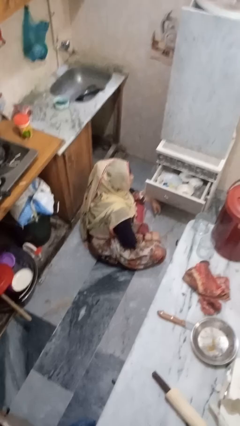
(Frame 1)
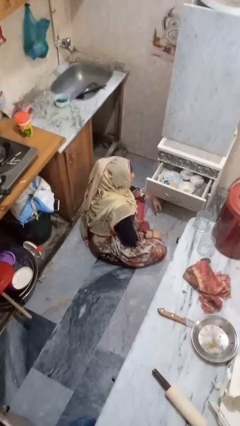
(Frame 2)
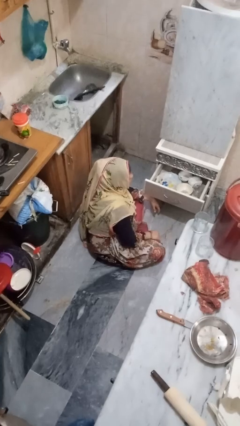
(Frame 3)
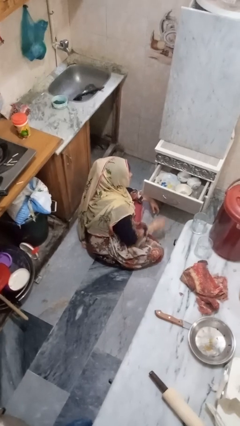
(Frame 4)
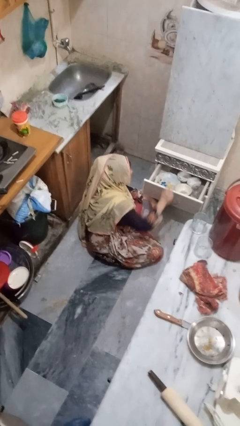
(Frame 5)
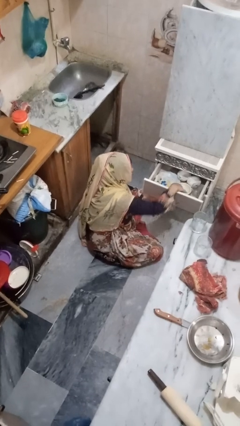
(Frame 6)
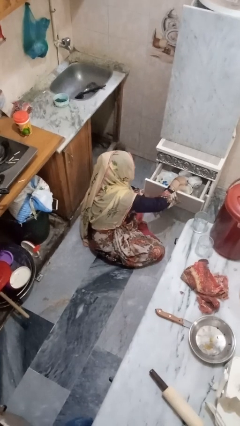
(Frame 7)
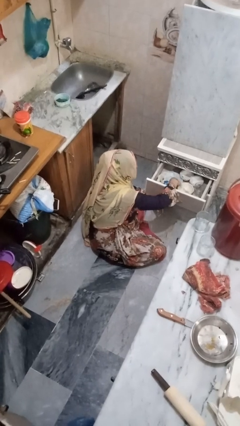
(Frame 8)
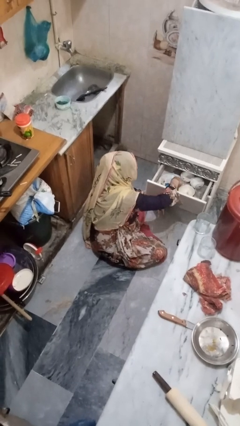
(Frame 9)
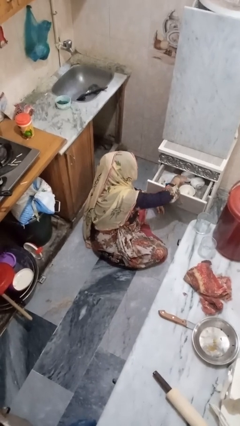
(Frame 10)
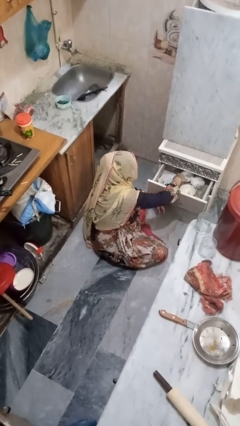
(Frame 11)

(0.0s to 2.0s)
person searches in kitchen drawer

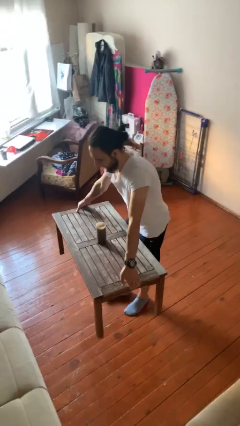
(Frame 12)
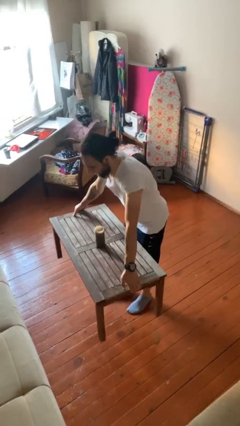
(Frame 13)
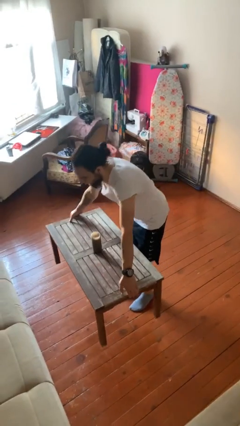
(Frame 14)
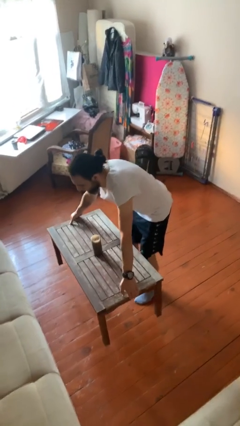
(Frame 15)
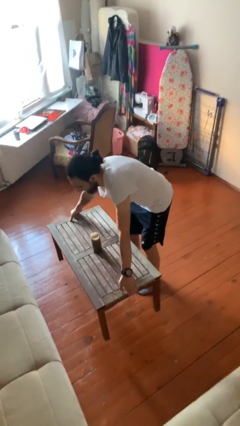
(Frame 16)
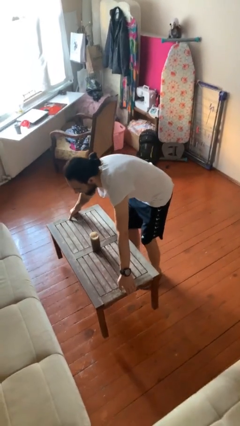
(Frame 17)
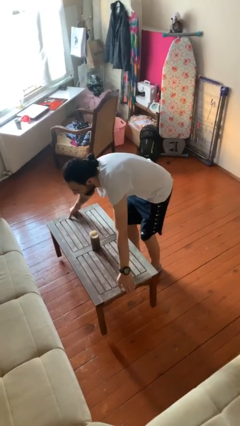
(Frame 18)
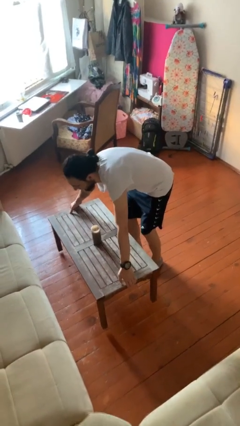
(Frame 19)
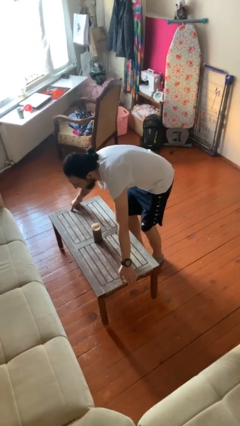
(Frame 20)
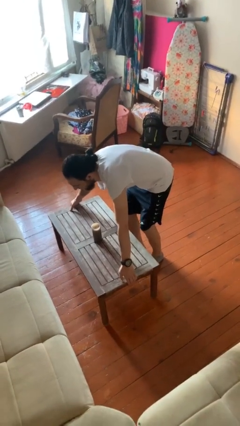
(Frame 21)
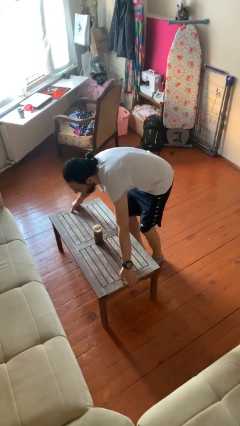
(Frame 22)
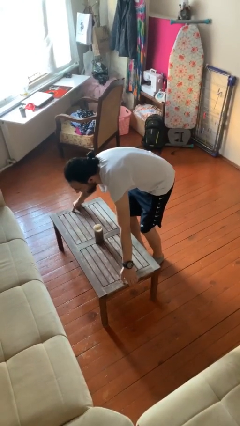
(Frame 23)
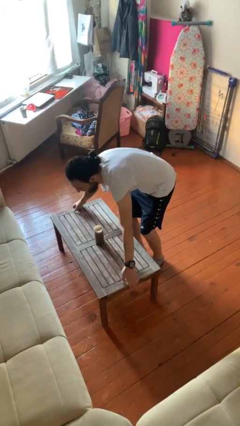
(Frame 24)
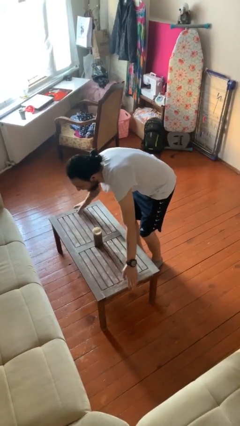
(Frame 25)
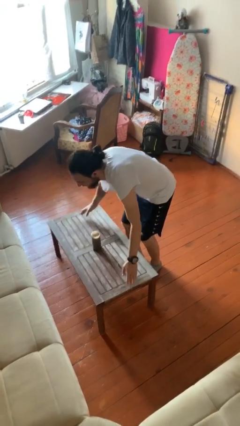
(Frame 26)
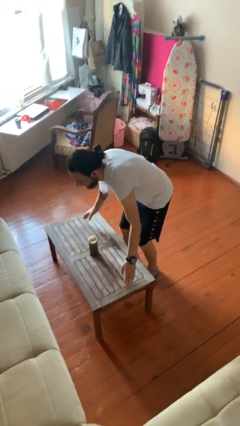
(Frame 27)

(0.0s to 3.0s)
person puts down object on floor

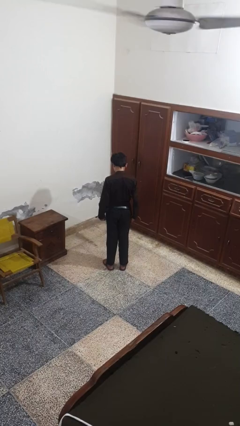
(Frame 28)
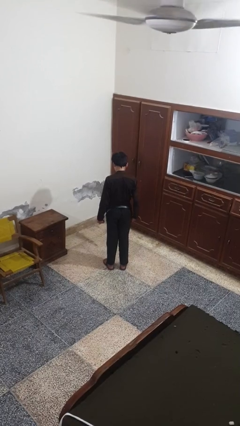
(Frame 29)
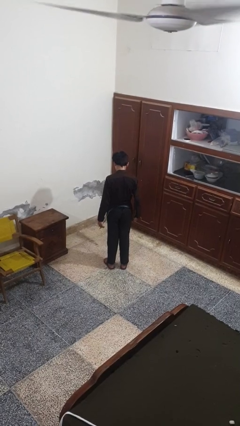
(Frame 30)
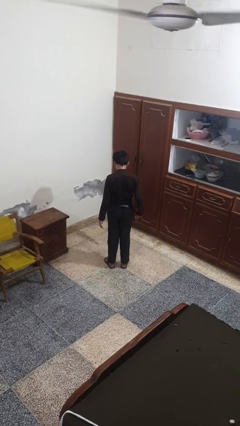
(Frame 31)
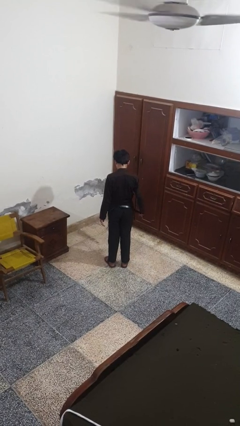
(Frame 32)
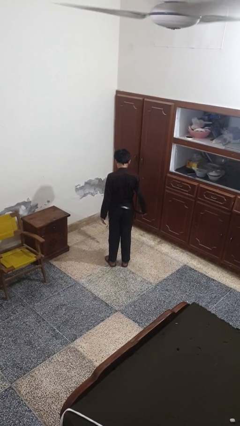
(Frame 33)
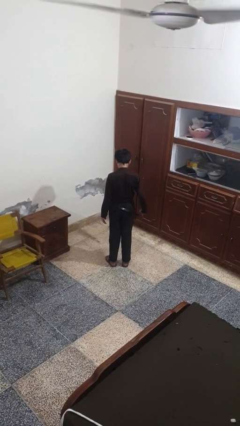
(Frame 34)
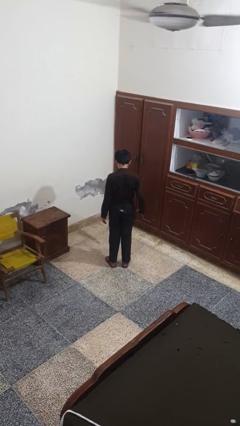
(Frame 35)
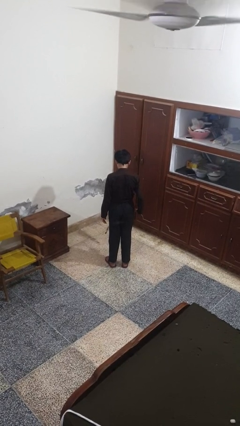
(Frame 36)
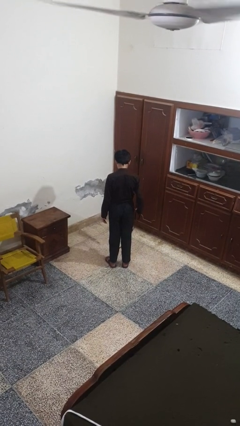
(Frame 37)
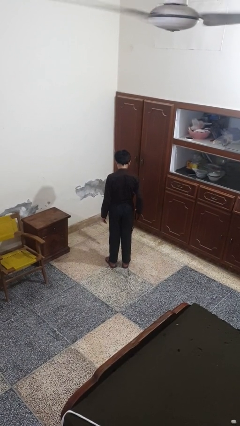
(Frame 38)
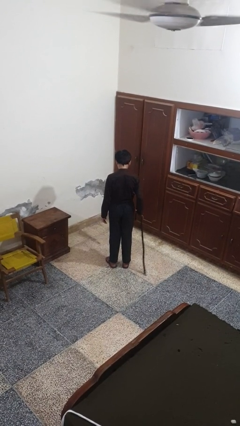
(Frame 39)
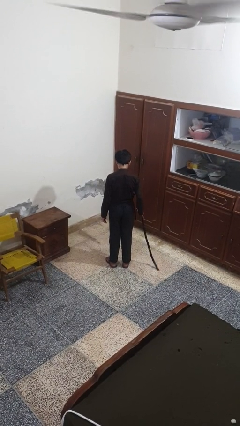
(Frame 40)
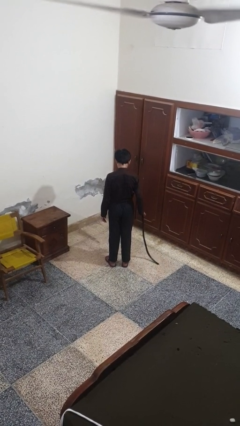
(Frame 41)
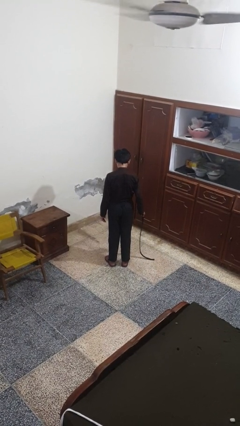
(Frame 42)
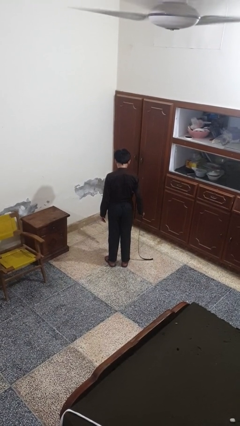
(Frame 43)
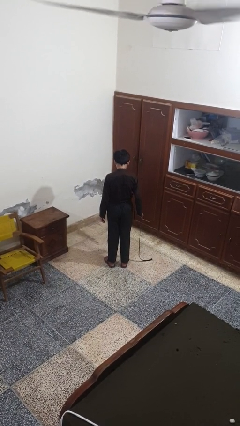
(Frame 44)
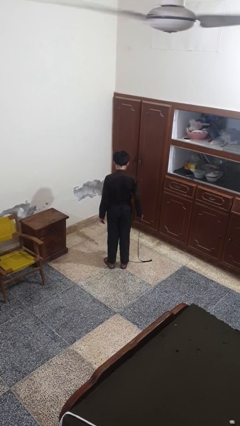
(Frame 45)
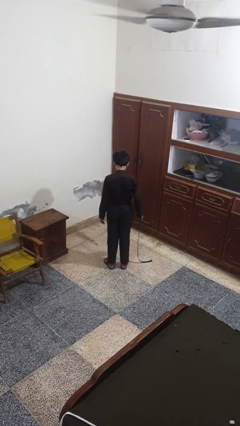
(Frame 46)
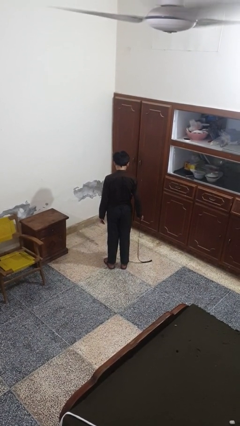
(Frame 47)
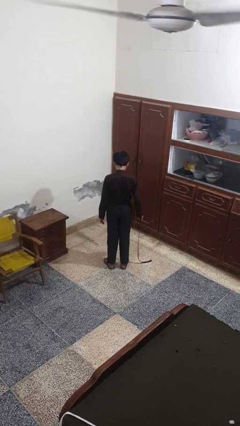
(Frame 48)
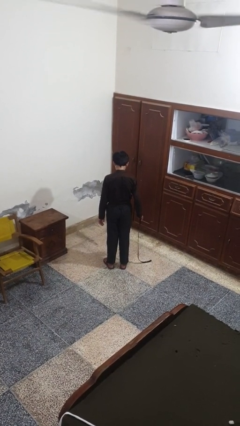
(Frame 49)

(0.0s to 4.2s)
person takes off belt

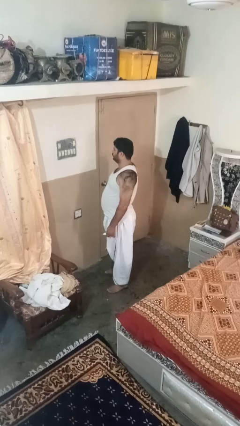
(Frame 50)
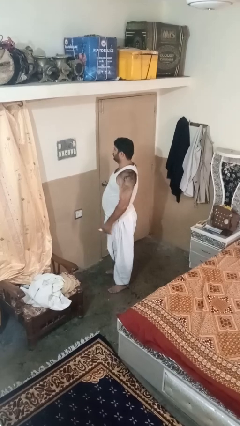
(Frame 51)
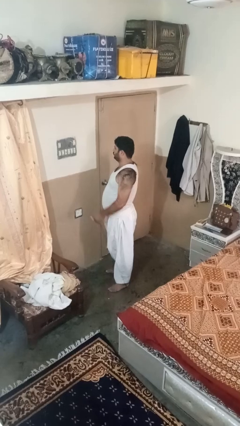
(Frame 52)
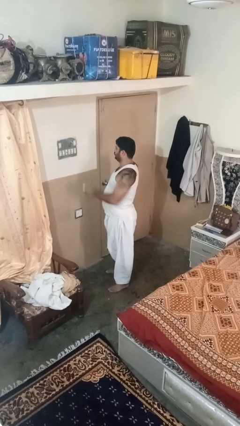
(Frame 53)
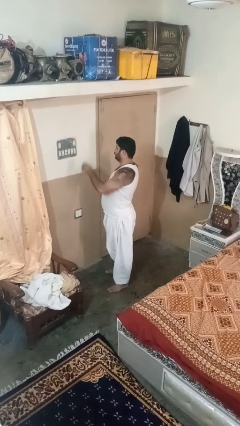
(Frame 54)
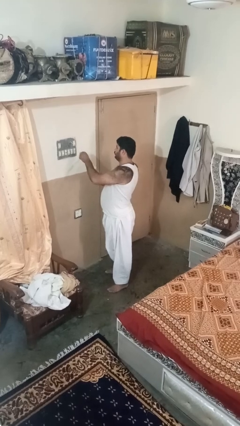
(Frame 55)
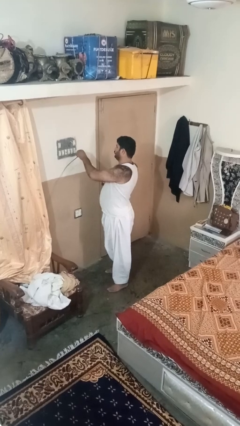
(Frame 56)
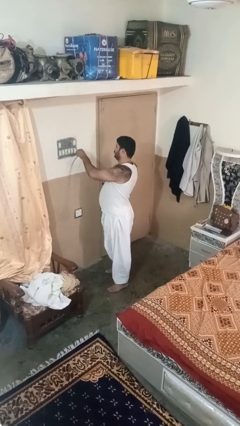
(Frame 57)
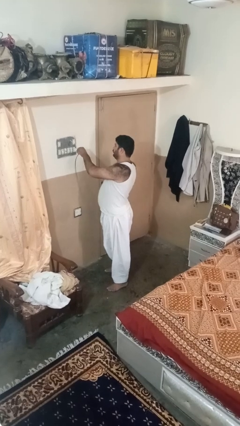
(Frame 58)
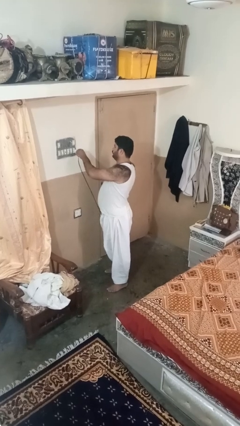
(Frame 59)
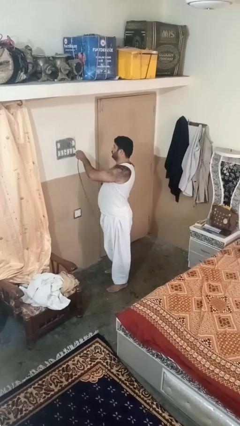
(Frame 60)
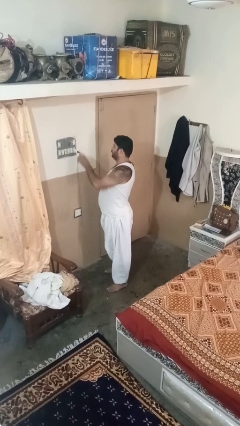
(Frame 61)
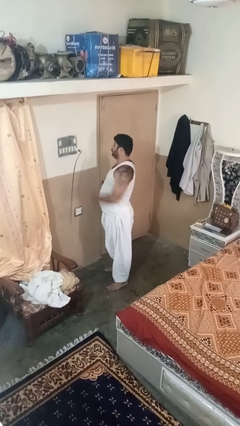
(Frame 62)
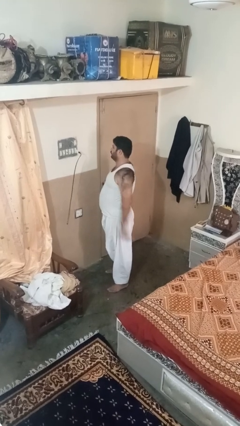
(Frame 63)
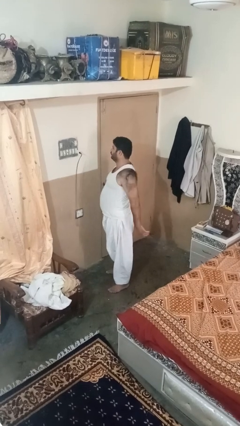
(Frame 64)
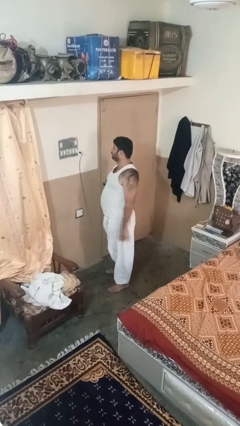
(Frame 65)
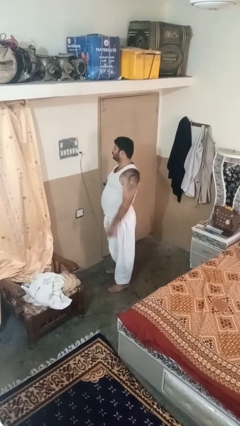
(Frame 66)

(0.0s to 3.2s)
person plugs into electrical socket

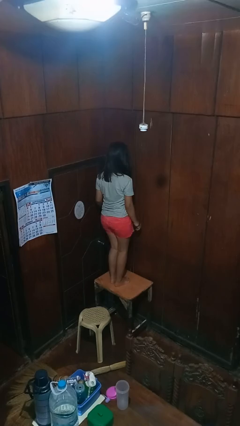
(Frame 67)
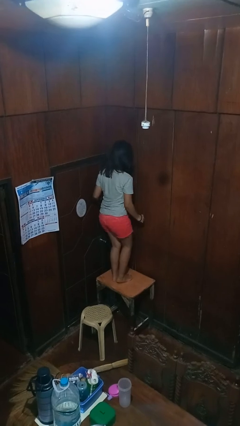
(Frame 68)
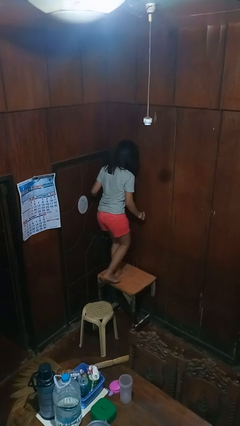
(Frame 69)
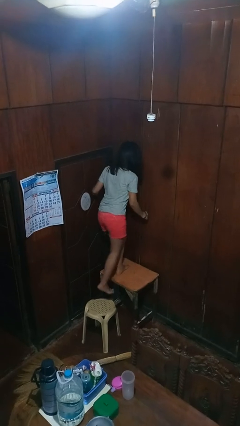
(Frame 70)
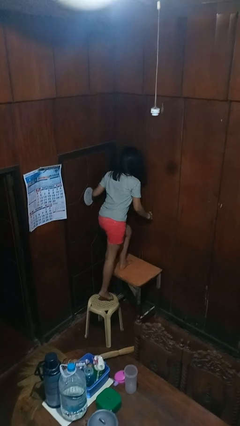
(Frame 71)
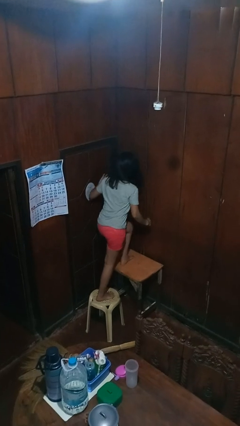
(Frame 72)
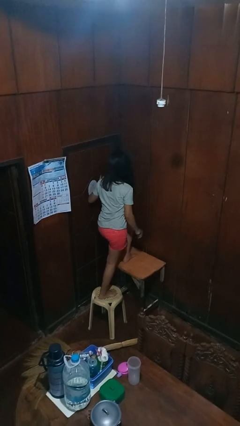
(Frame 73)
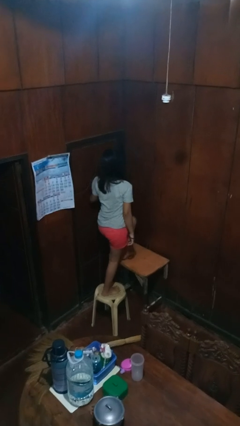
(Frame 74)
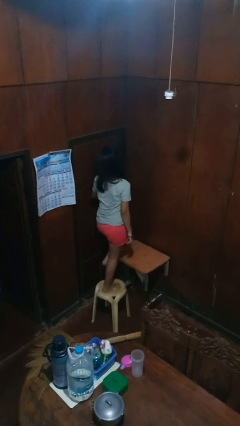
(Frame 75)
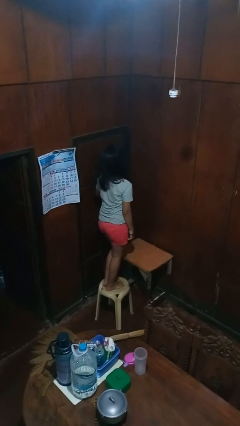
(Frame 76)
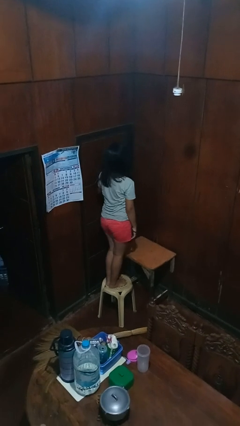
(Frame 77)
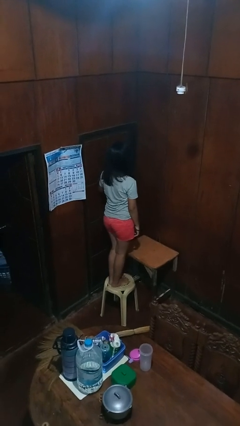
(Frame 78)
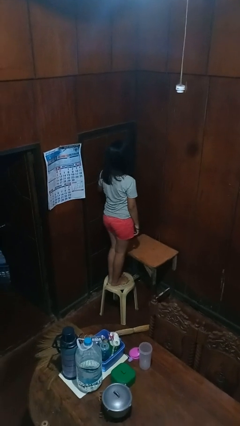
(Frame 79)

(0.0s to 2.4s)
person climbs off table

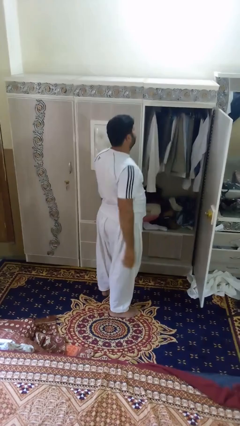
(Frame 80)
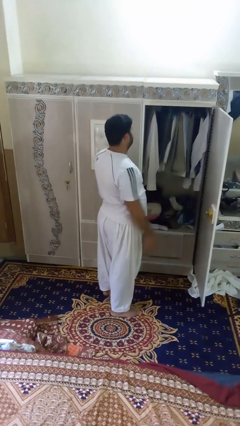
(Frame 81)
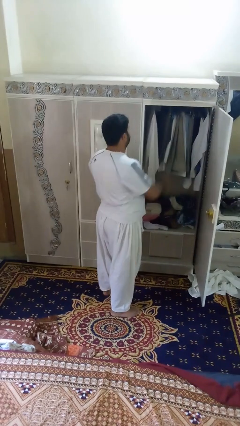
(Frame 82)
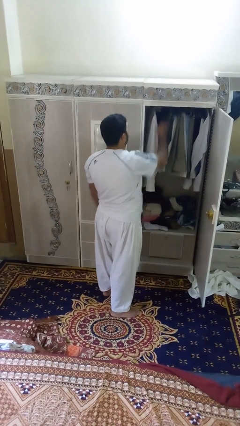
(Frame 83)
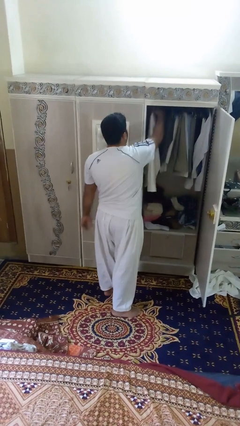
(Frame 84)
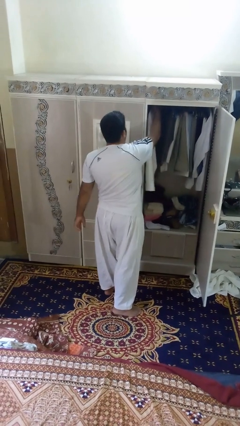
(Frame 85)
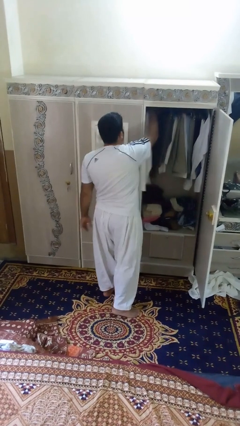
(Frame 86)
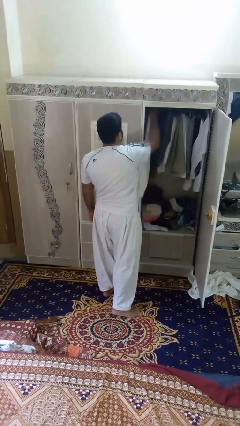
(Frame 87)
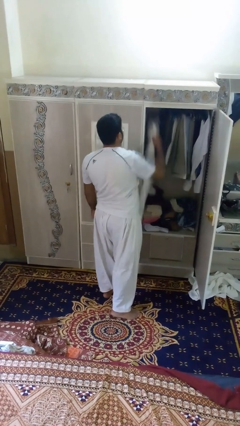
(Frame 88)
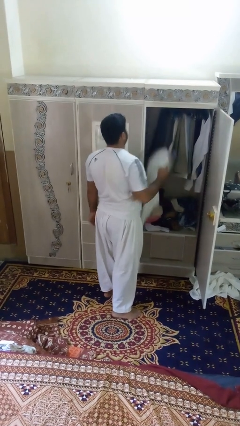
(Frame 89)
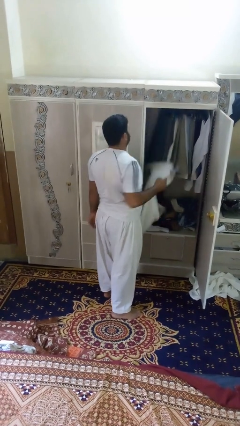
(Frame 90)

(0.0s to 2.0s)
person takes clothes from closet

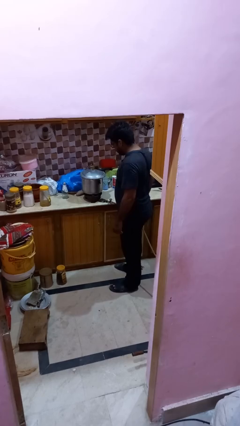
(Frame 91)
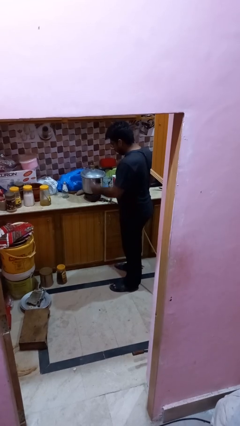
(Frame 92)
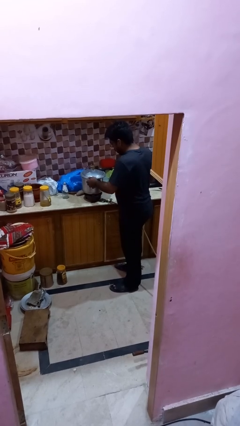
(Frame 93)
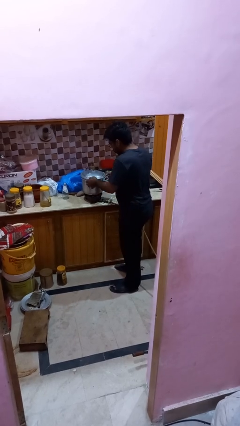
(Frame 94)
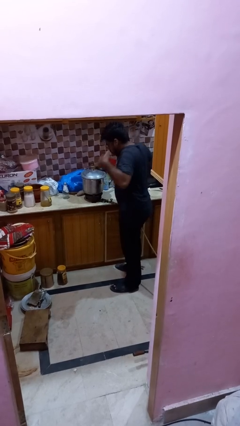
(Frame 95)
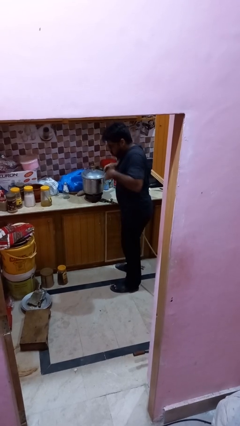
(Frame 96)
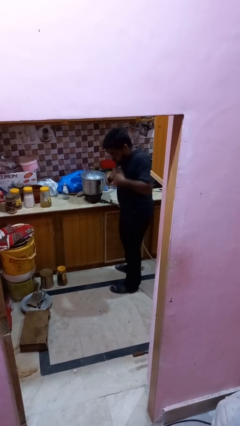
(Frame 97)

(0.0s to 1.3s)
person burns hand
